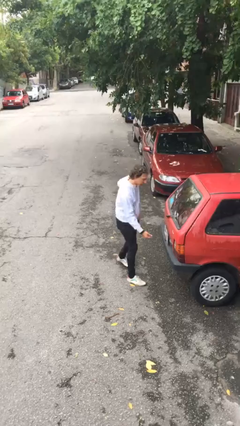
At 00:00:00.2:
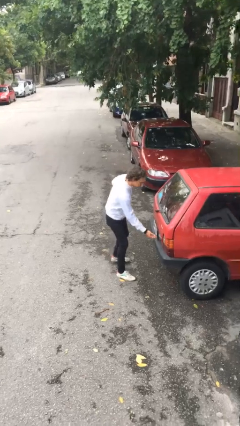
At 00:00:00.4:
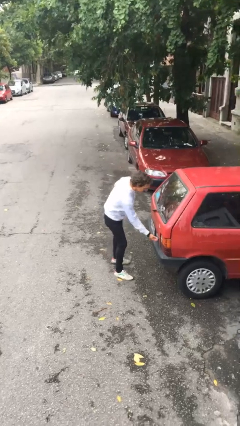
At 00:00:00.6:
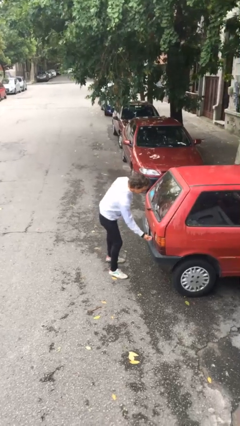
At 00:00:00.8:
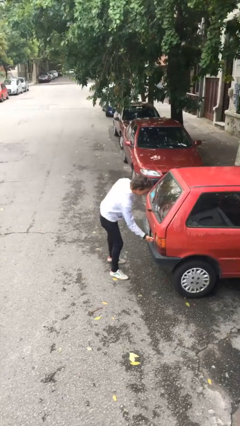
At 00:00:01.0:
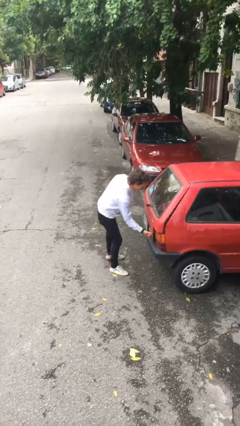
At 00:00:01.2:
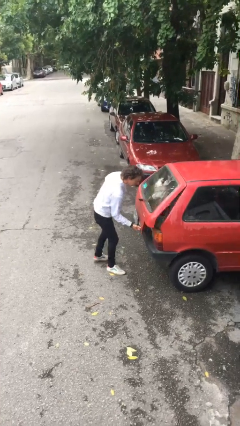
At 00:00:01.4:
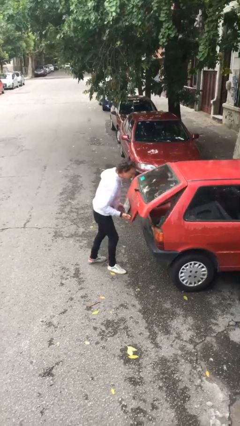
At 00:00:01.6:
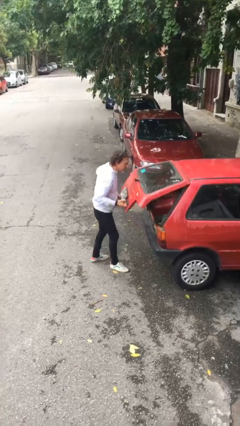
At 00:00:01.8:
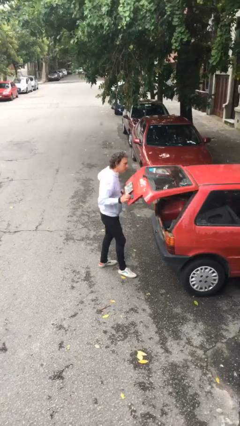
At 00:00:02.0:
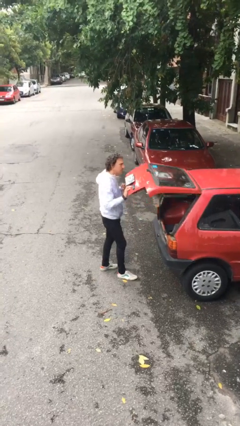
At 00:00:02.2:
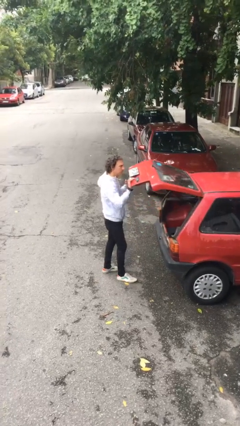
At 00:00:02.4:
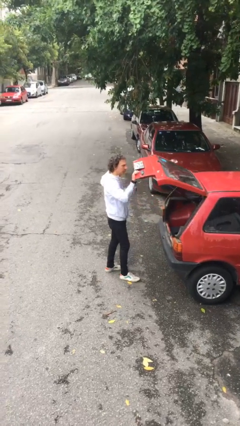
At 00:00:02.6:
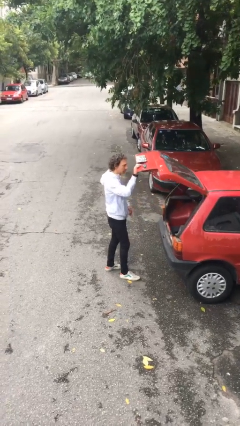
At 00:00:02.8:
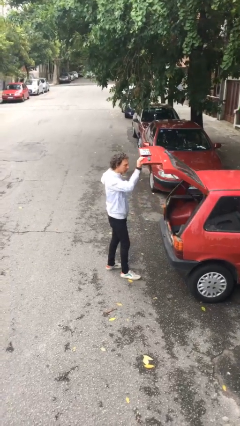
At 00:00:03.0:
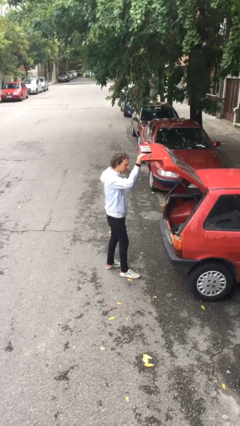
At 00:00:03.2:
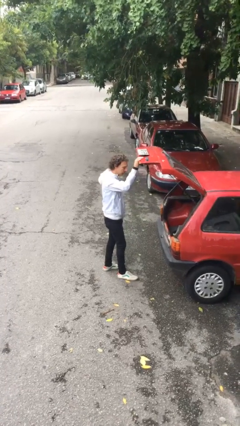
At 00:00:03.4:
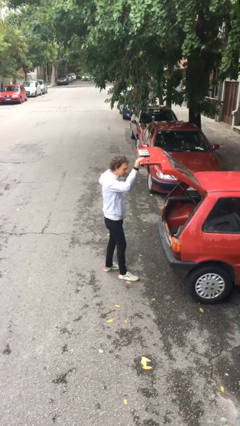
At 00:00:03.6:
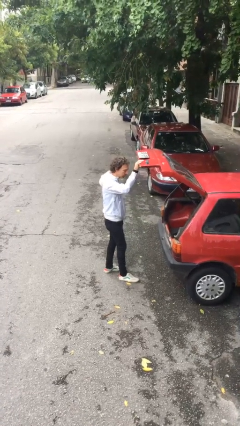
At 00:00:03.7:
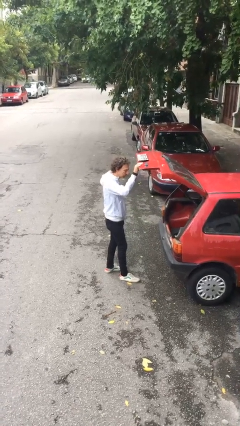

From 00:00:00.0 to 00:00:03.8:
person opens car trunk

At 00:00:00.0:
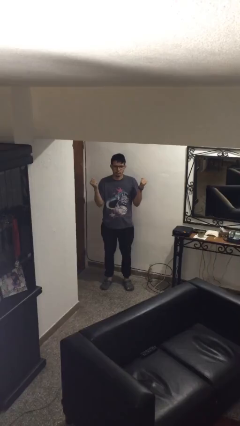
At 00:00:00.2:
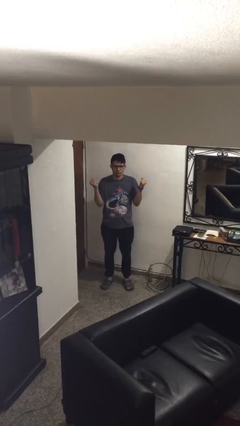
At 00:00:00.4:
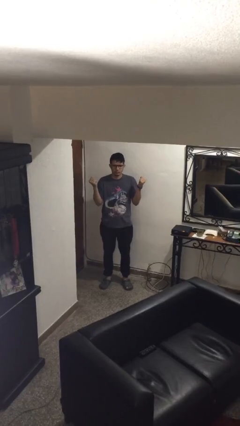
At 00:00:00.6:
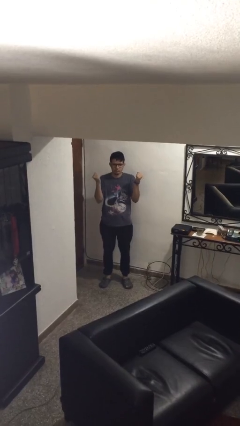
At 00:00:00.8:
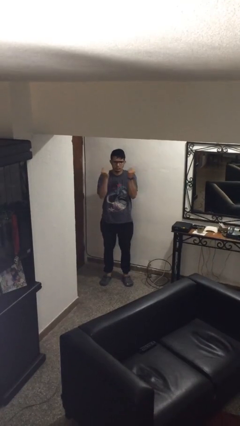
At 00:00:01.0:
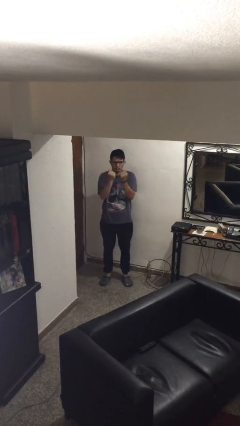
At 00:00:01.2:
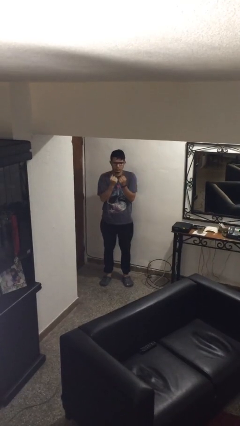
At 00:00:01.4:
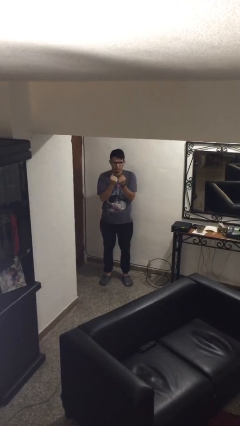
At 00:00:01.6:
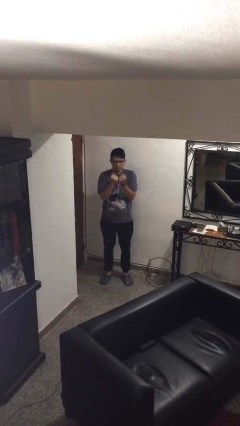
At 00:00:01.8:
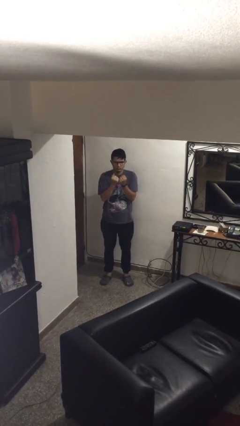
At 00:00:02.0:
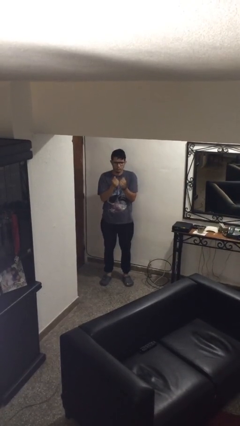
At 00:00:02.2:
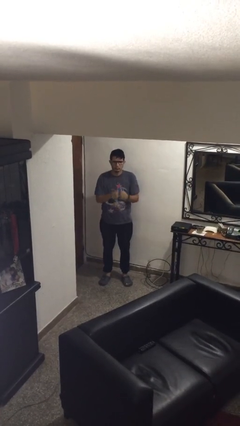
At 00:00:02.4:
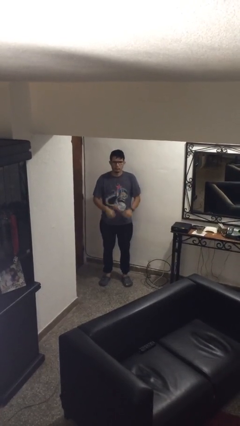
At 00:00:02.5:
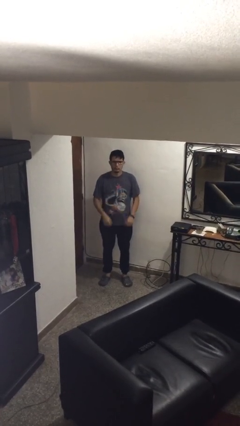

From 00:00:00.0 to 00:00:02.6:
person gestures zoom out

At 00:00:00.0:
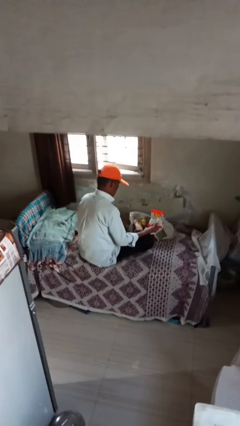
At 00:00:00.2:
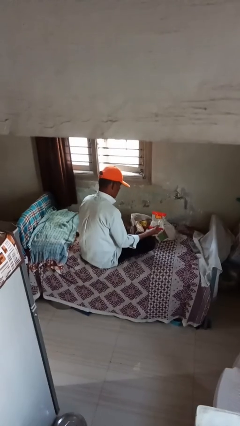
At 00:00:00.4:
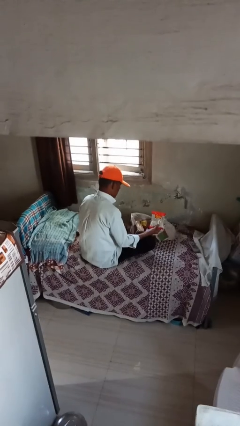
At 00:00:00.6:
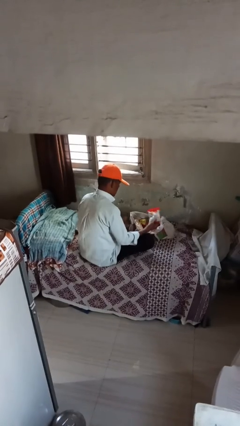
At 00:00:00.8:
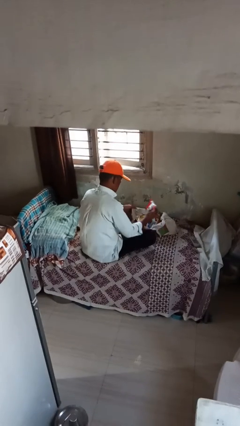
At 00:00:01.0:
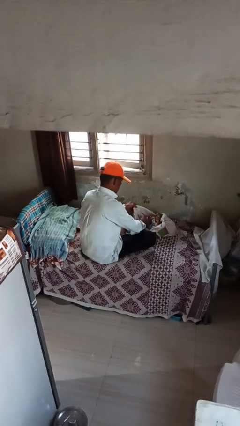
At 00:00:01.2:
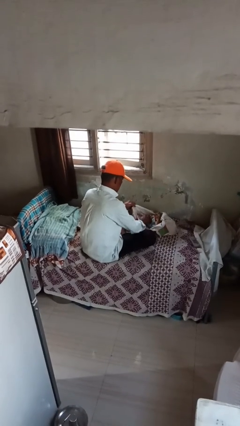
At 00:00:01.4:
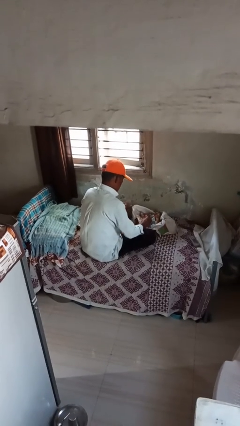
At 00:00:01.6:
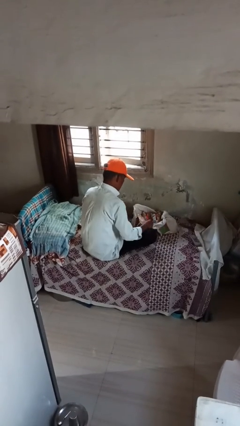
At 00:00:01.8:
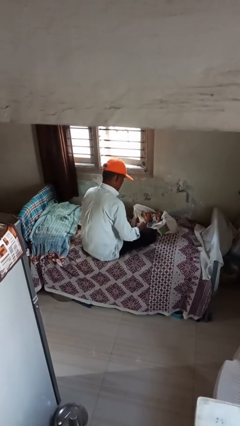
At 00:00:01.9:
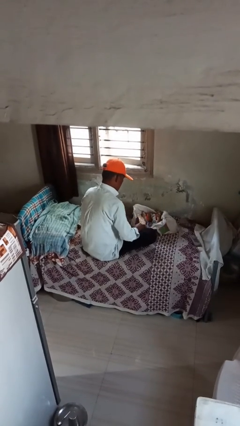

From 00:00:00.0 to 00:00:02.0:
person puts object into bag

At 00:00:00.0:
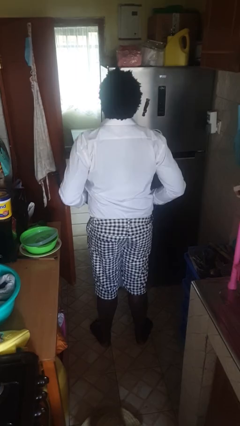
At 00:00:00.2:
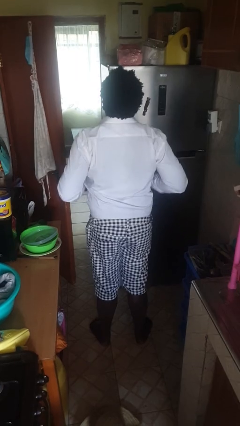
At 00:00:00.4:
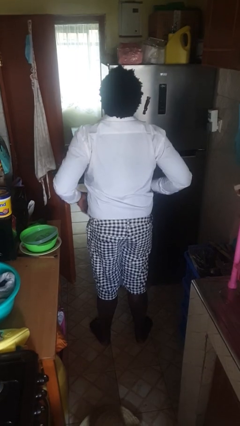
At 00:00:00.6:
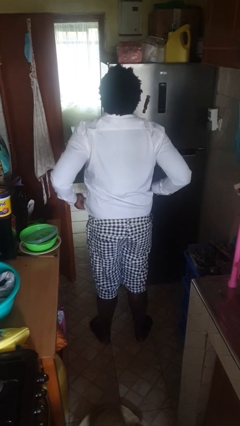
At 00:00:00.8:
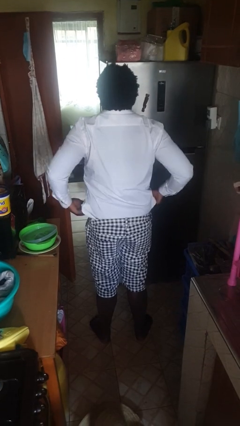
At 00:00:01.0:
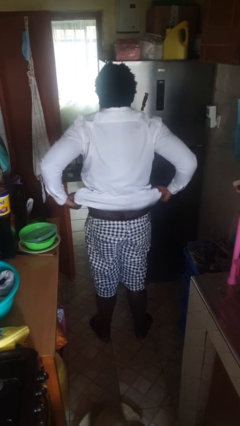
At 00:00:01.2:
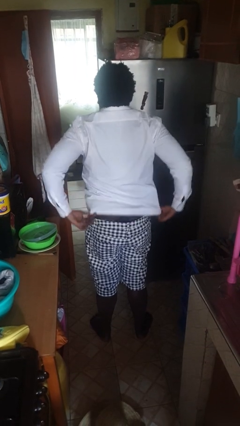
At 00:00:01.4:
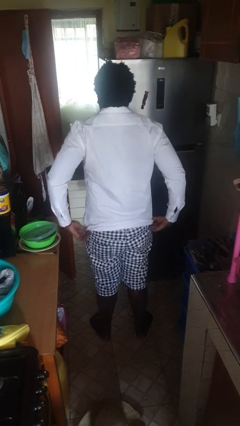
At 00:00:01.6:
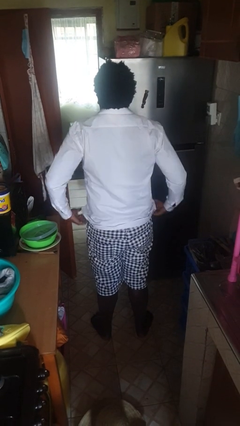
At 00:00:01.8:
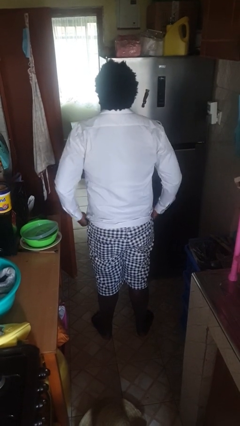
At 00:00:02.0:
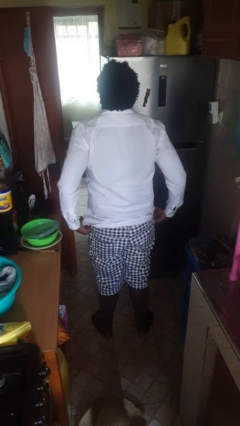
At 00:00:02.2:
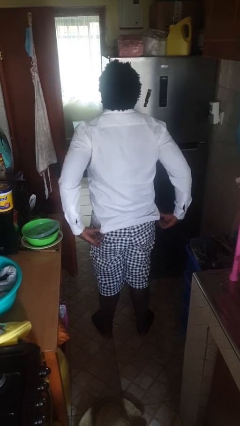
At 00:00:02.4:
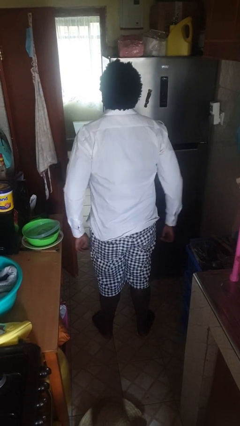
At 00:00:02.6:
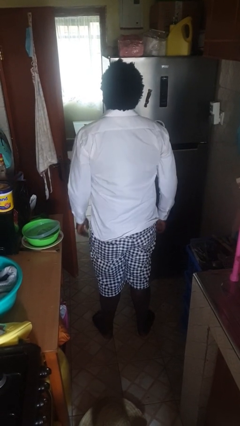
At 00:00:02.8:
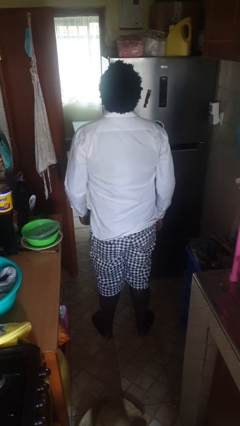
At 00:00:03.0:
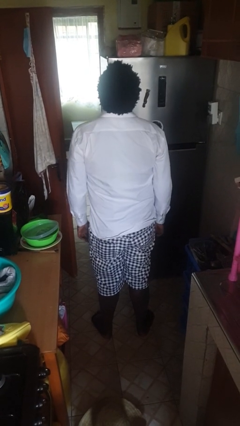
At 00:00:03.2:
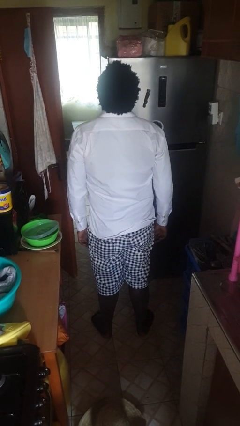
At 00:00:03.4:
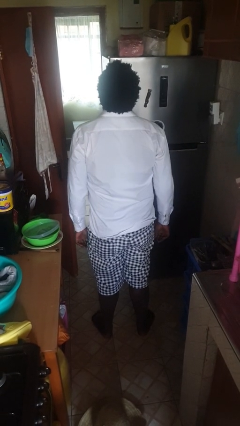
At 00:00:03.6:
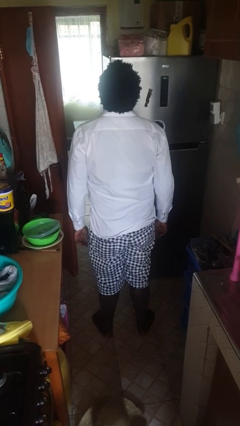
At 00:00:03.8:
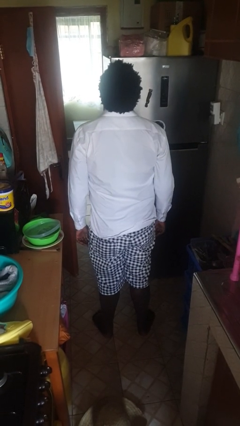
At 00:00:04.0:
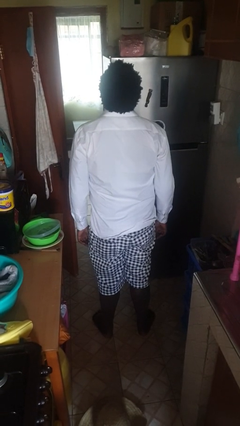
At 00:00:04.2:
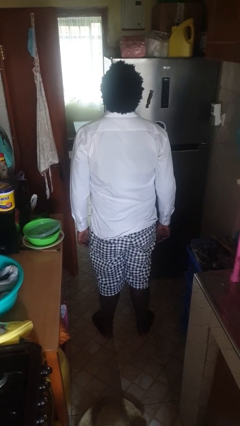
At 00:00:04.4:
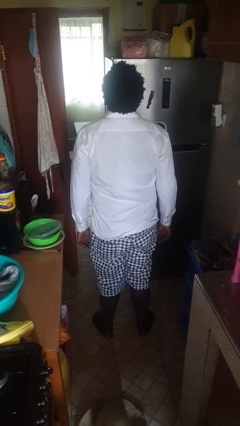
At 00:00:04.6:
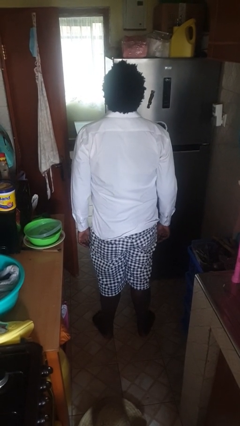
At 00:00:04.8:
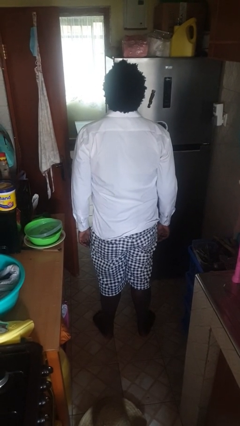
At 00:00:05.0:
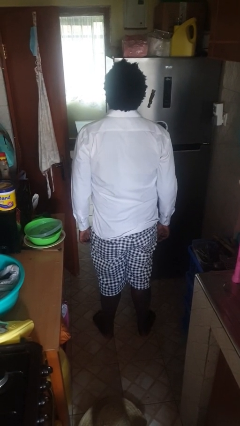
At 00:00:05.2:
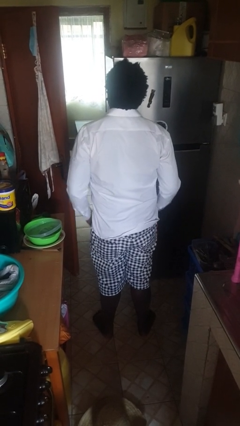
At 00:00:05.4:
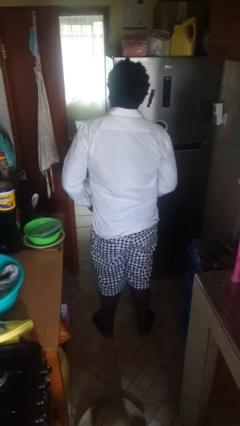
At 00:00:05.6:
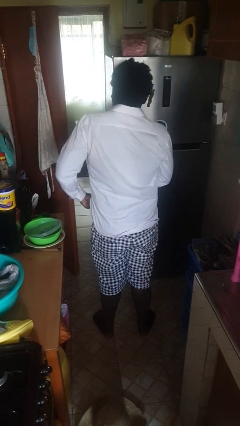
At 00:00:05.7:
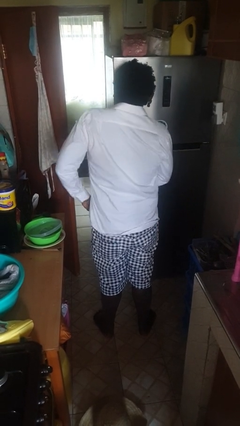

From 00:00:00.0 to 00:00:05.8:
person untucks shirt

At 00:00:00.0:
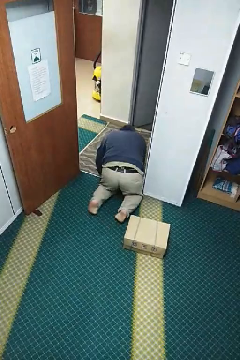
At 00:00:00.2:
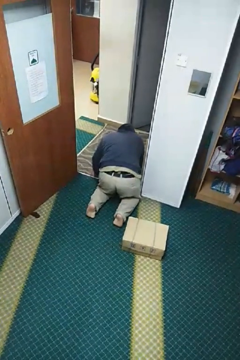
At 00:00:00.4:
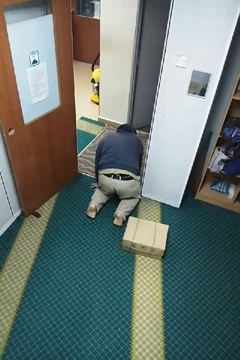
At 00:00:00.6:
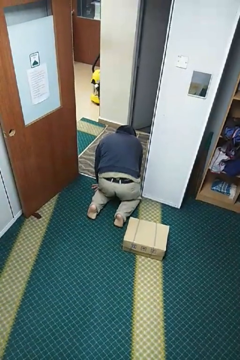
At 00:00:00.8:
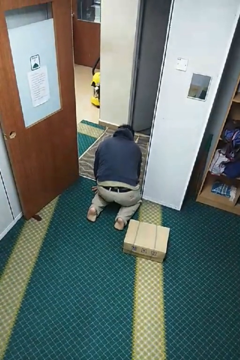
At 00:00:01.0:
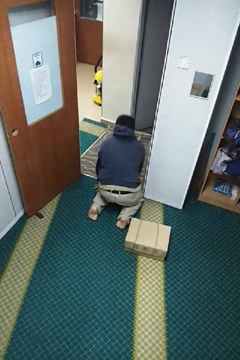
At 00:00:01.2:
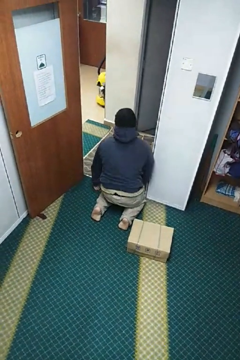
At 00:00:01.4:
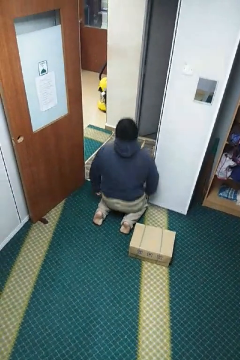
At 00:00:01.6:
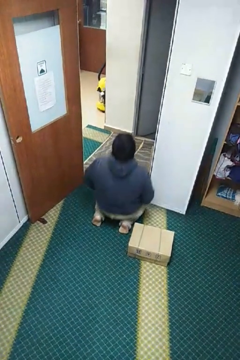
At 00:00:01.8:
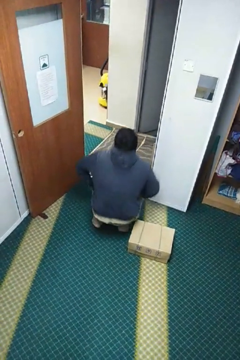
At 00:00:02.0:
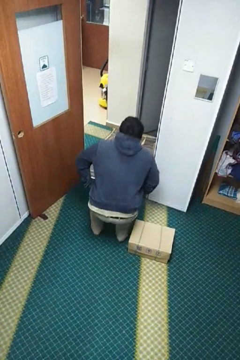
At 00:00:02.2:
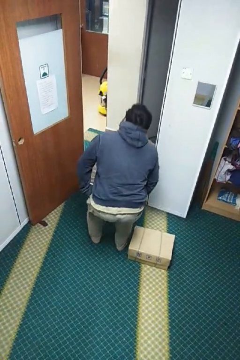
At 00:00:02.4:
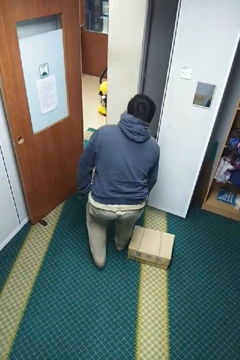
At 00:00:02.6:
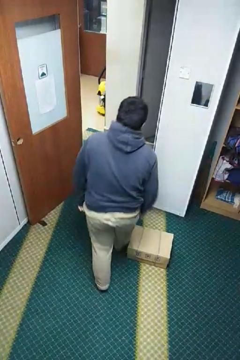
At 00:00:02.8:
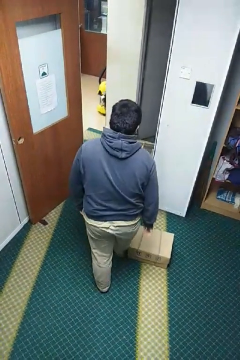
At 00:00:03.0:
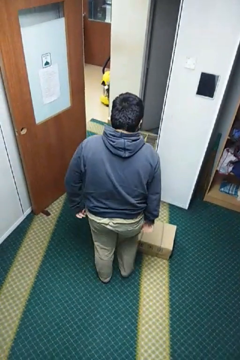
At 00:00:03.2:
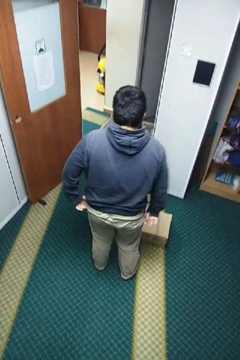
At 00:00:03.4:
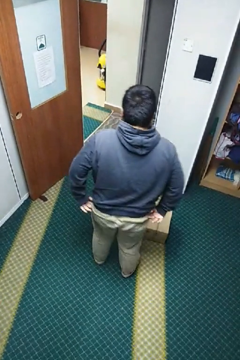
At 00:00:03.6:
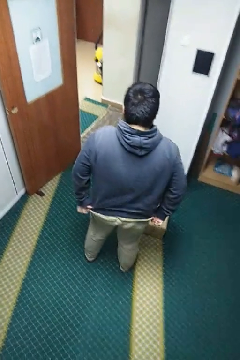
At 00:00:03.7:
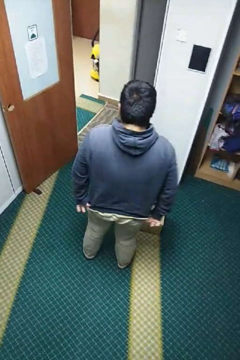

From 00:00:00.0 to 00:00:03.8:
person stands up from floor
